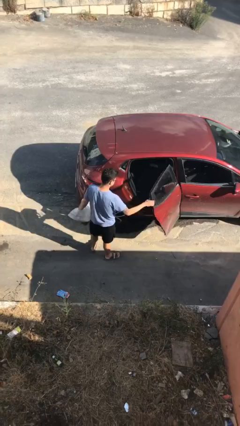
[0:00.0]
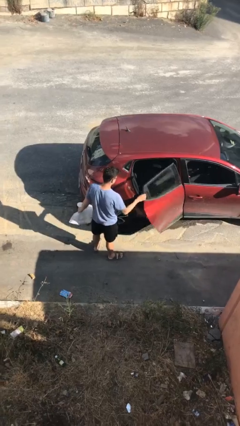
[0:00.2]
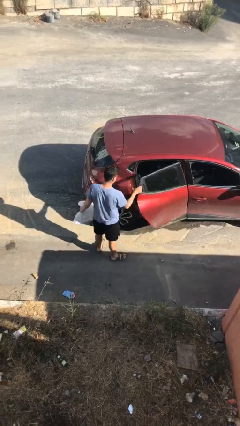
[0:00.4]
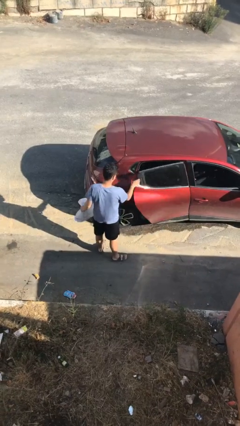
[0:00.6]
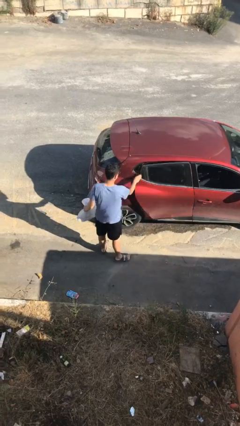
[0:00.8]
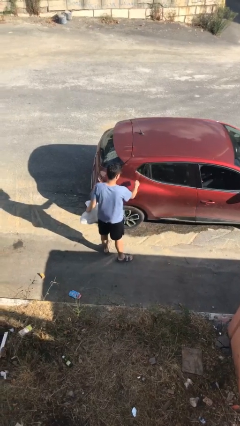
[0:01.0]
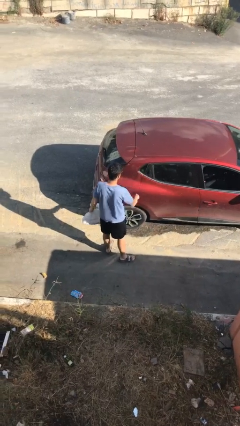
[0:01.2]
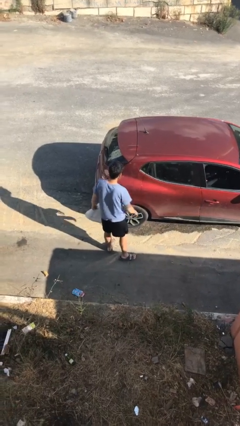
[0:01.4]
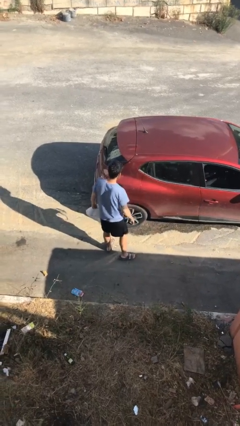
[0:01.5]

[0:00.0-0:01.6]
person closes car door

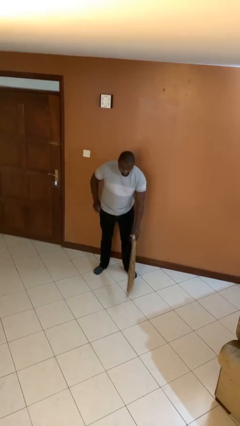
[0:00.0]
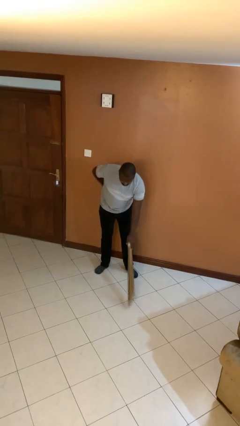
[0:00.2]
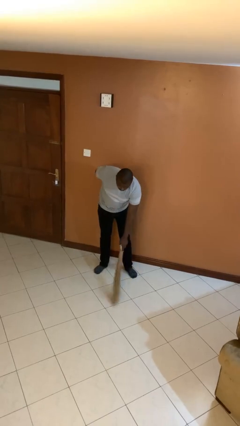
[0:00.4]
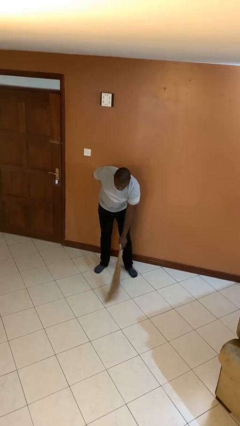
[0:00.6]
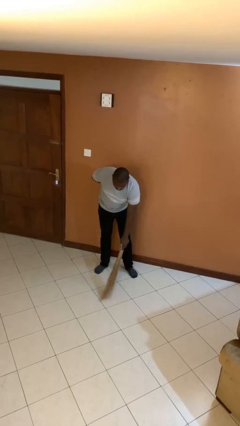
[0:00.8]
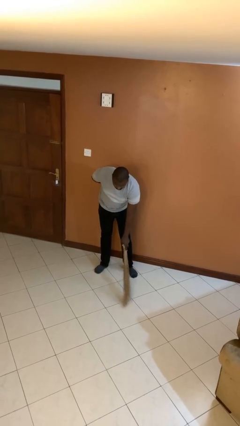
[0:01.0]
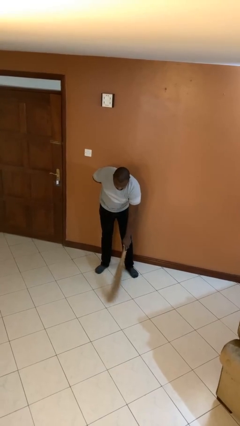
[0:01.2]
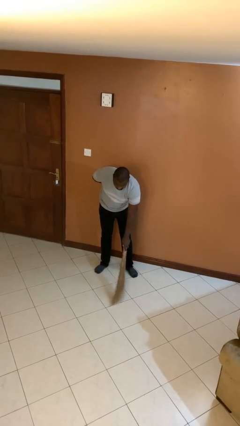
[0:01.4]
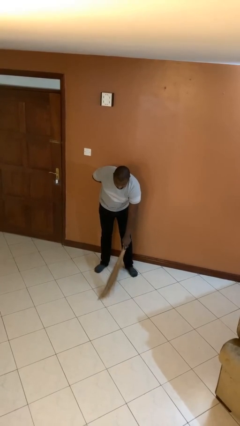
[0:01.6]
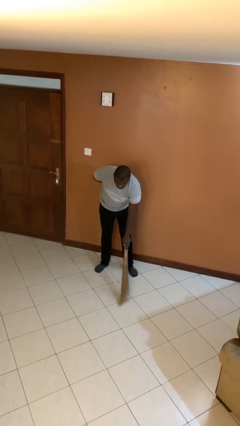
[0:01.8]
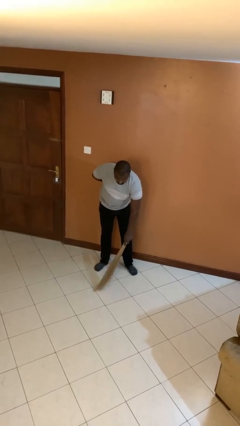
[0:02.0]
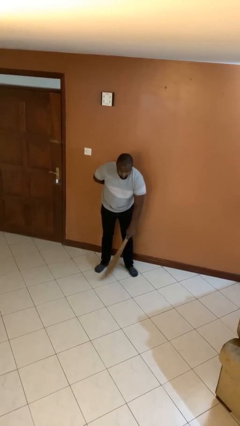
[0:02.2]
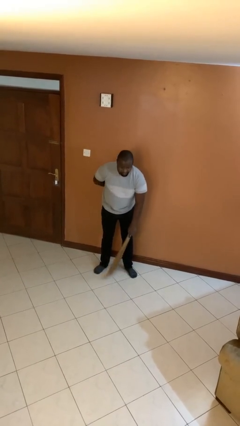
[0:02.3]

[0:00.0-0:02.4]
person sweeps floor

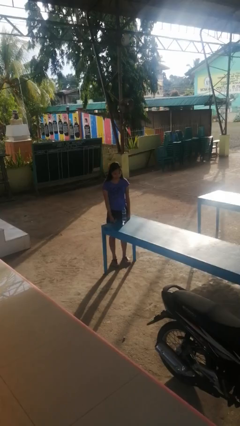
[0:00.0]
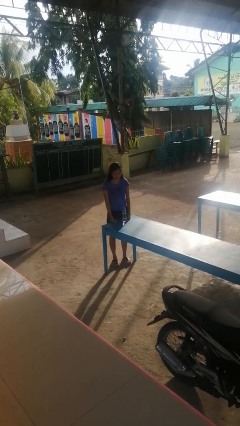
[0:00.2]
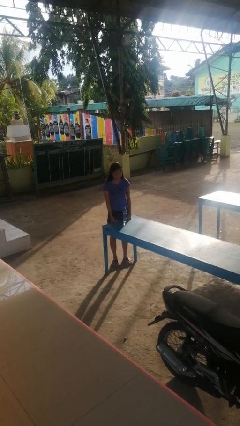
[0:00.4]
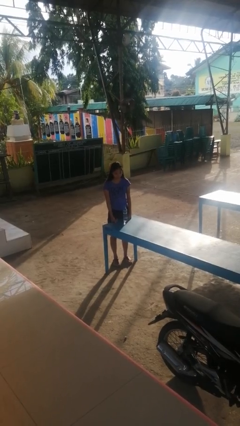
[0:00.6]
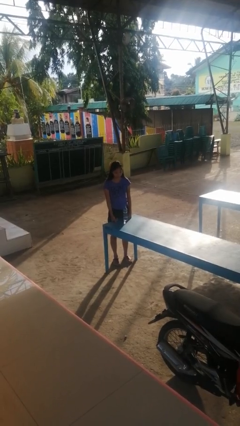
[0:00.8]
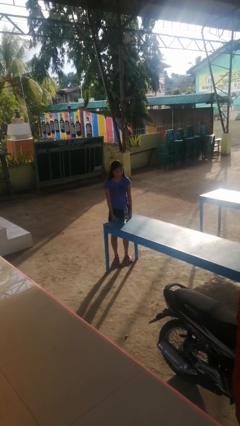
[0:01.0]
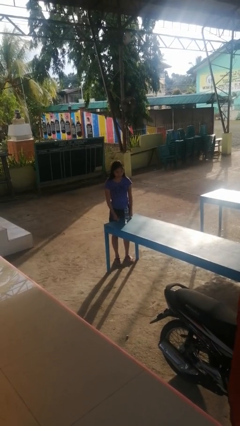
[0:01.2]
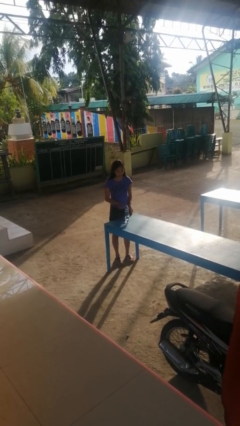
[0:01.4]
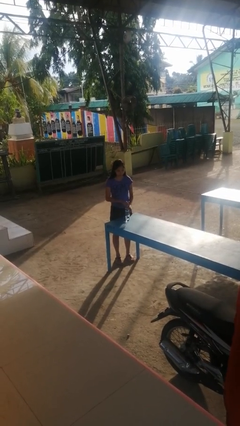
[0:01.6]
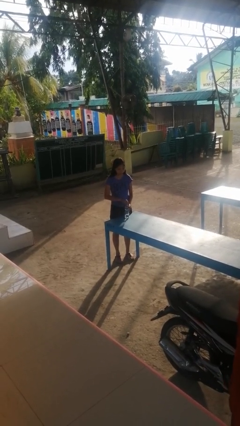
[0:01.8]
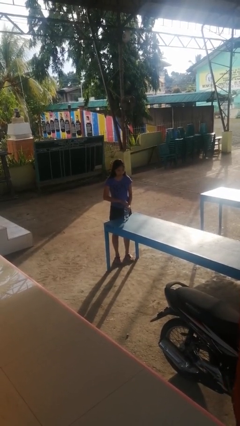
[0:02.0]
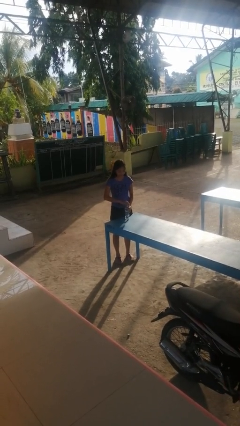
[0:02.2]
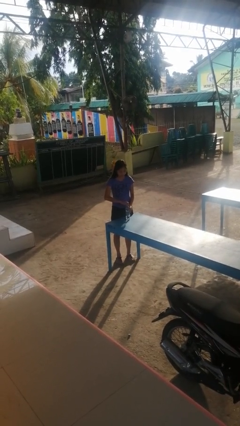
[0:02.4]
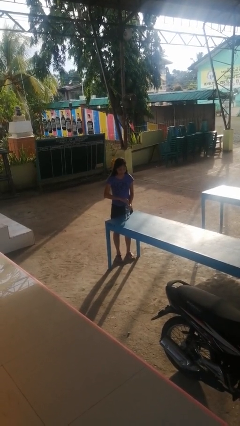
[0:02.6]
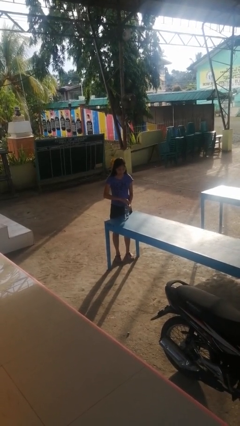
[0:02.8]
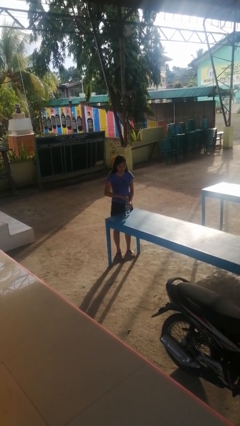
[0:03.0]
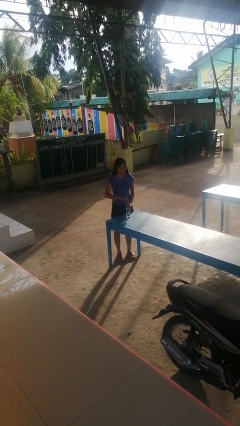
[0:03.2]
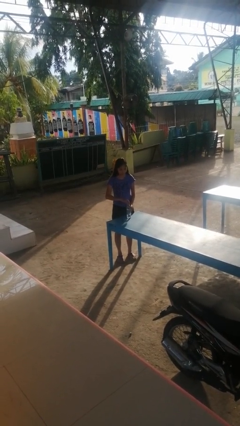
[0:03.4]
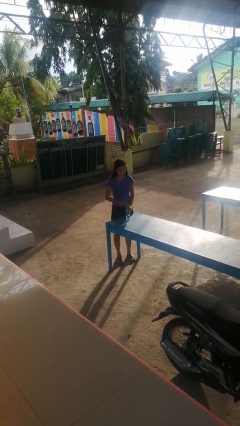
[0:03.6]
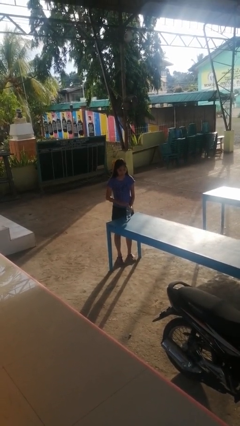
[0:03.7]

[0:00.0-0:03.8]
person unscrews lid from bottle

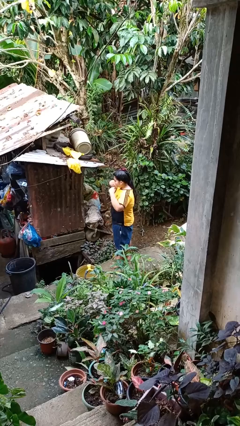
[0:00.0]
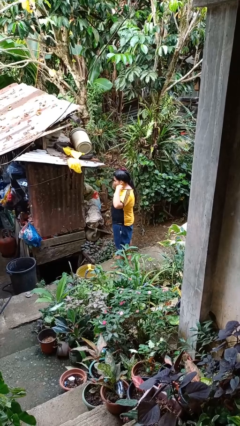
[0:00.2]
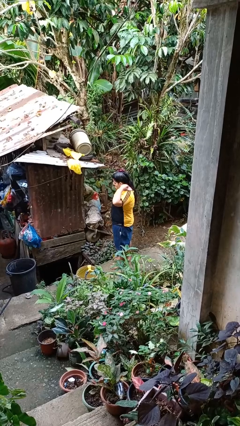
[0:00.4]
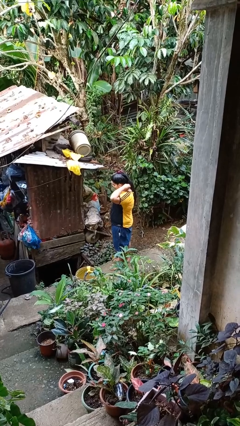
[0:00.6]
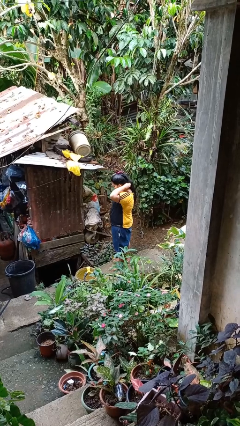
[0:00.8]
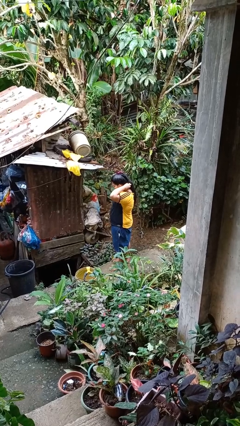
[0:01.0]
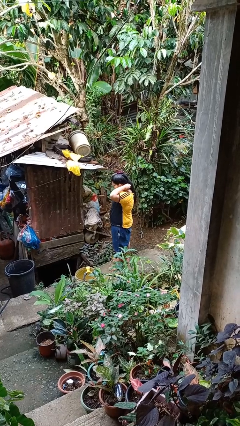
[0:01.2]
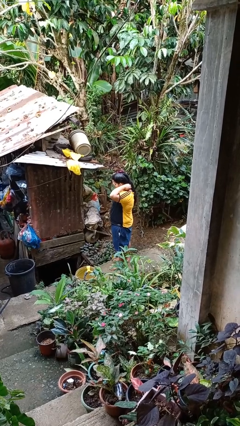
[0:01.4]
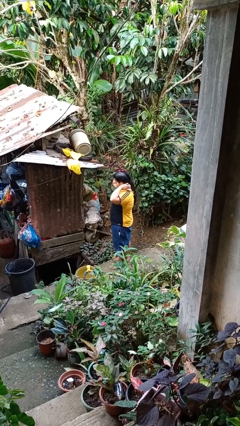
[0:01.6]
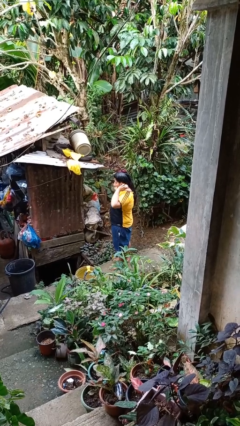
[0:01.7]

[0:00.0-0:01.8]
person puts on necklace

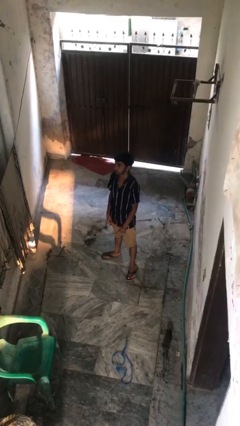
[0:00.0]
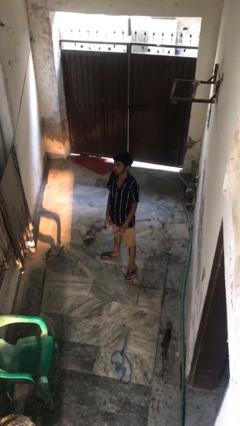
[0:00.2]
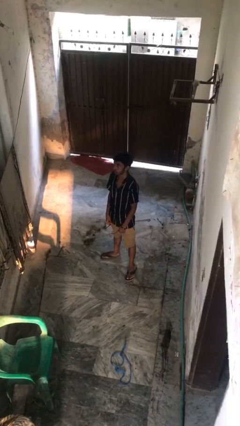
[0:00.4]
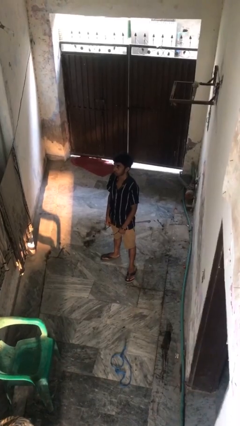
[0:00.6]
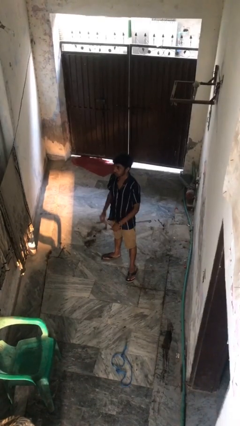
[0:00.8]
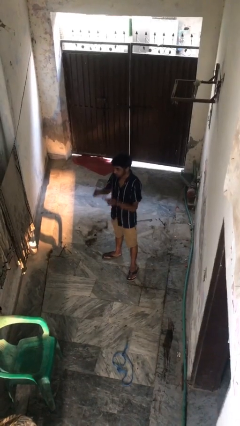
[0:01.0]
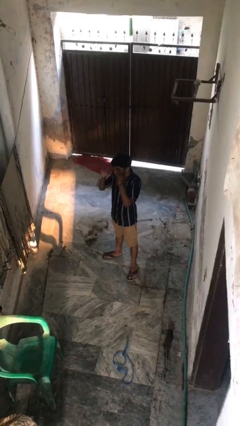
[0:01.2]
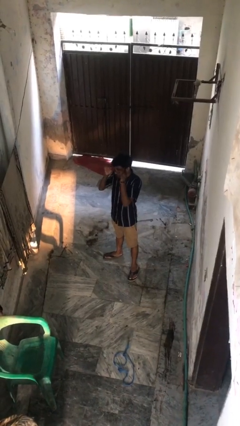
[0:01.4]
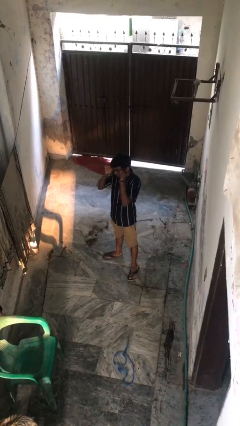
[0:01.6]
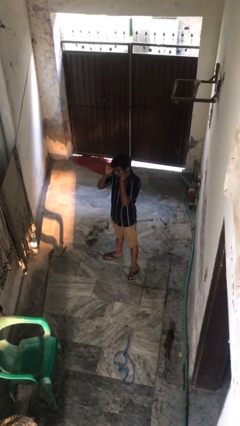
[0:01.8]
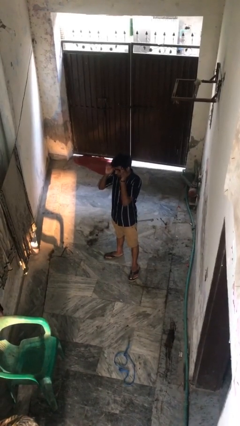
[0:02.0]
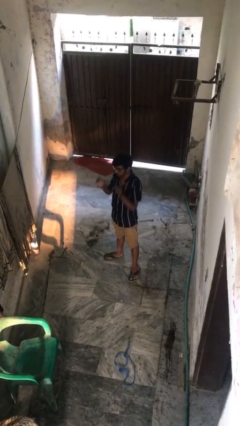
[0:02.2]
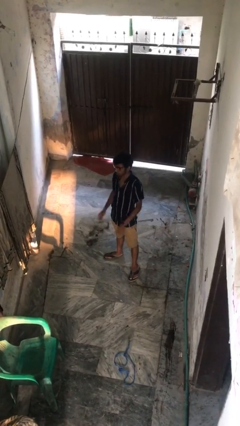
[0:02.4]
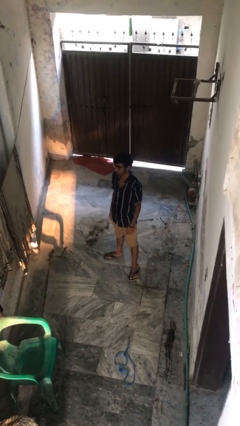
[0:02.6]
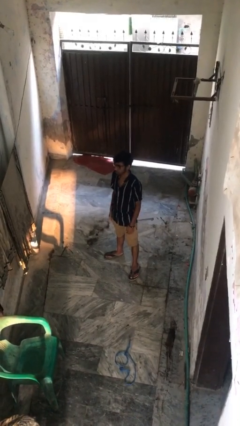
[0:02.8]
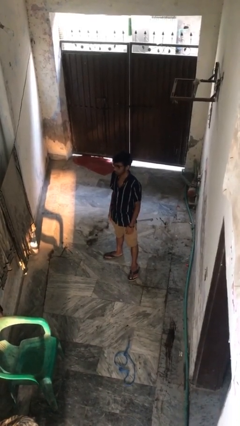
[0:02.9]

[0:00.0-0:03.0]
person puts on glasses

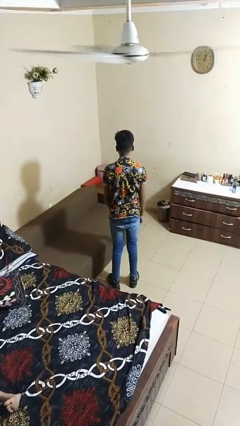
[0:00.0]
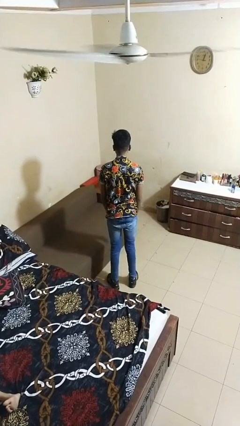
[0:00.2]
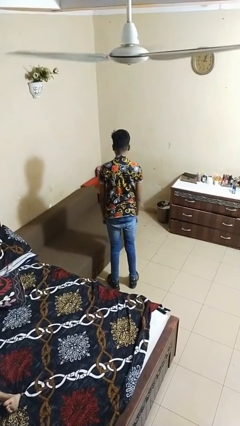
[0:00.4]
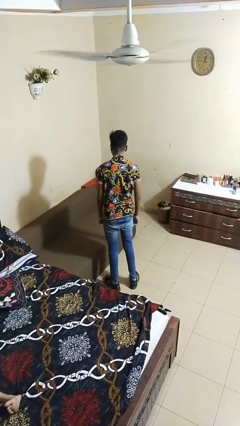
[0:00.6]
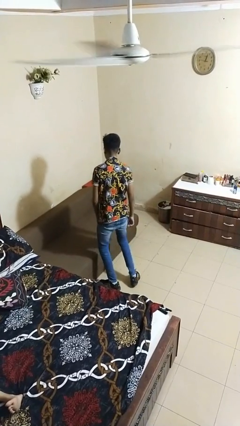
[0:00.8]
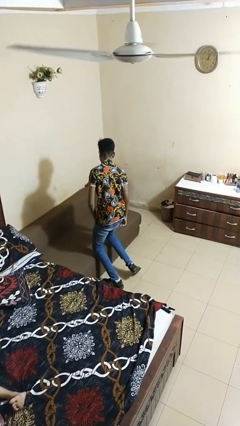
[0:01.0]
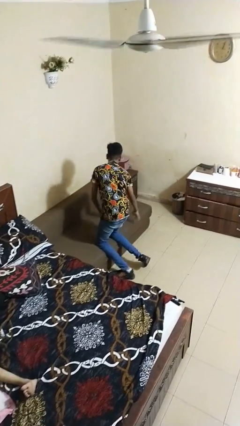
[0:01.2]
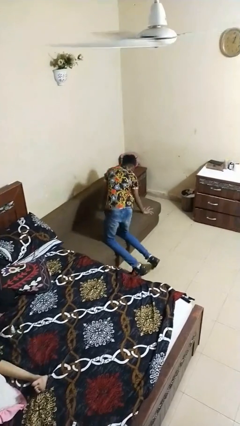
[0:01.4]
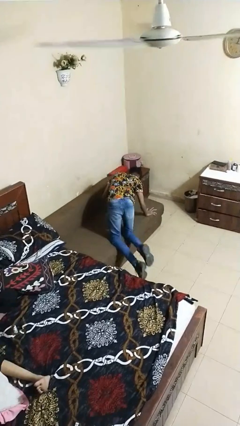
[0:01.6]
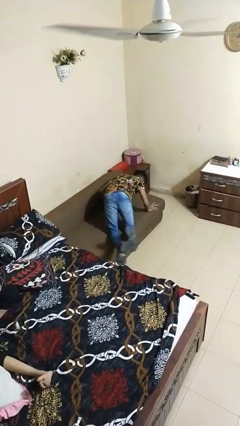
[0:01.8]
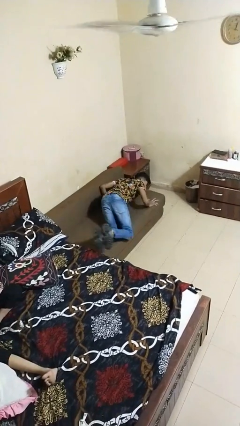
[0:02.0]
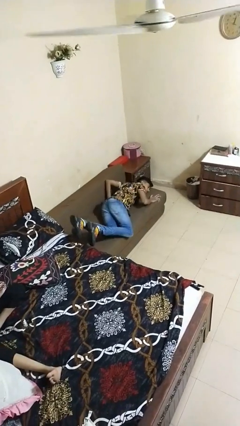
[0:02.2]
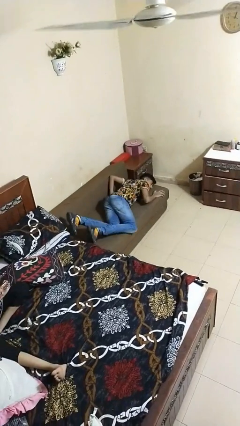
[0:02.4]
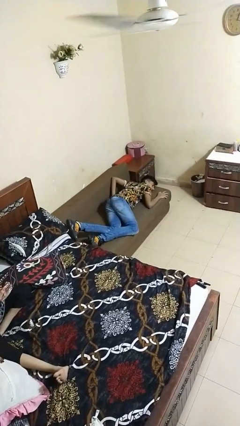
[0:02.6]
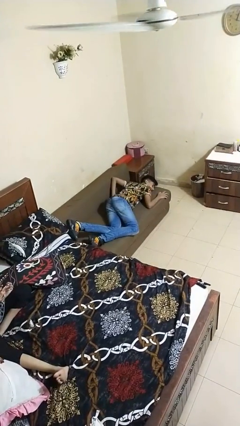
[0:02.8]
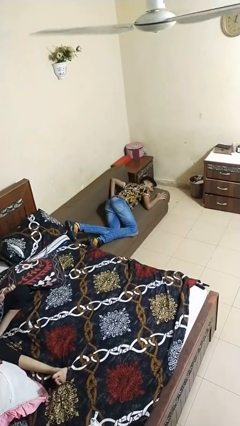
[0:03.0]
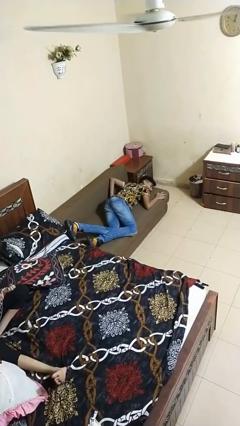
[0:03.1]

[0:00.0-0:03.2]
person lies down on bed

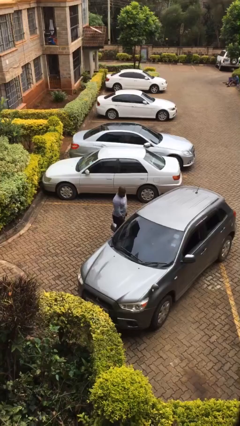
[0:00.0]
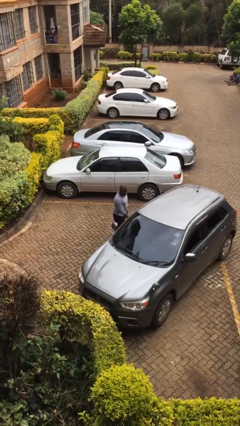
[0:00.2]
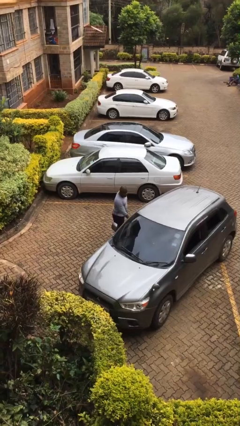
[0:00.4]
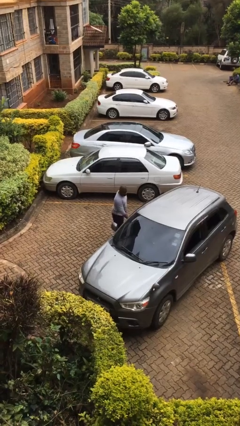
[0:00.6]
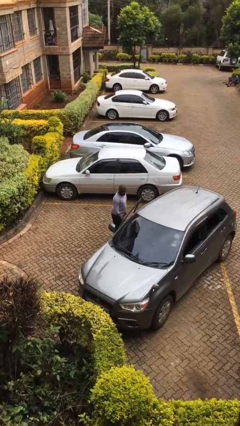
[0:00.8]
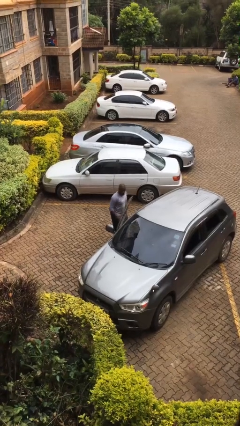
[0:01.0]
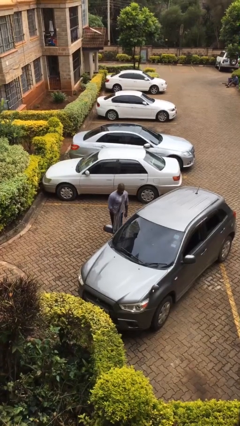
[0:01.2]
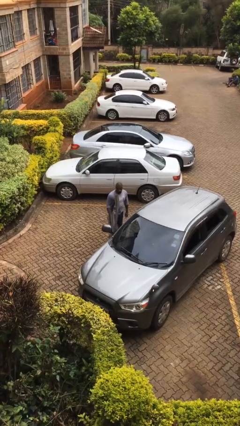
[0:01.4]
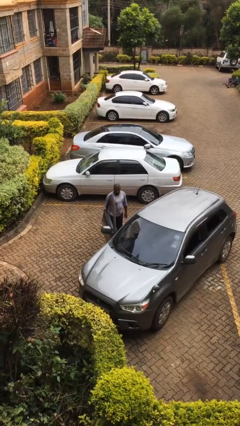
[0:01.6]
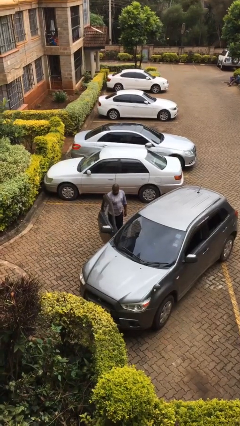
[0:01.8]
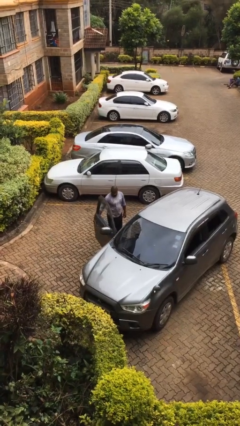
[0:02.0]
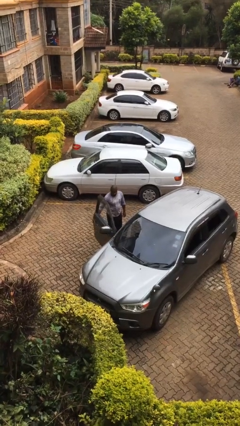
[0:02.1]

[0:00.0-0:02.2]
person opens car door
